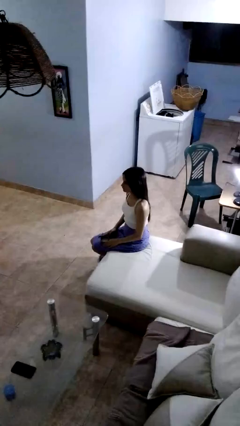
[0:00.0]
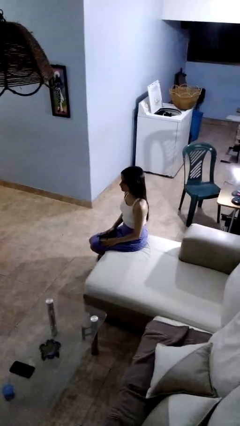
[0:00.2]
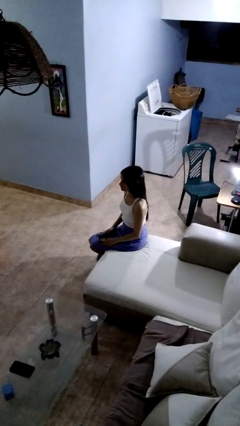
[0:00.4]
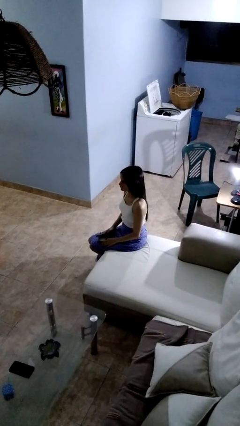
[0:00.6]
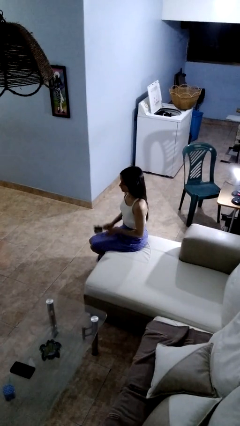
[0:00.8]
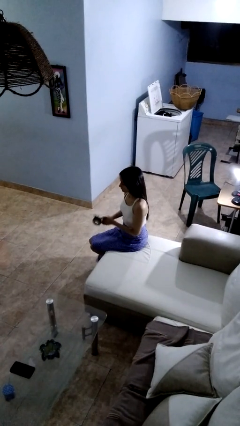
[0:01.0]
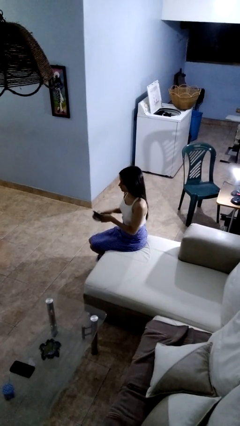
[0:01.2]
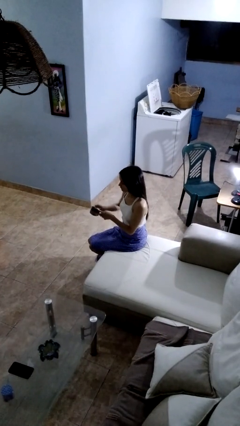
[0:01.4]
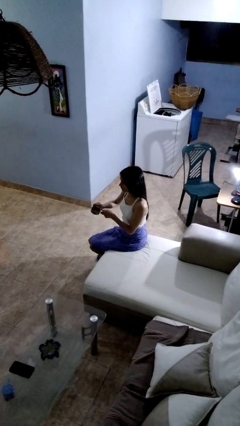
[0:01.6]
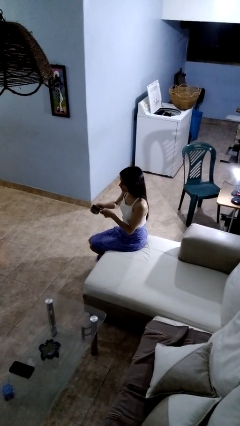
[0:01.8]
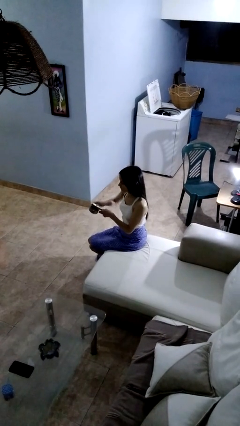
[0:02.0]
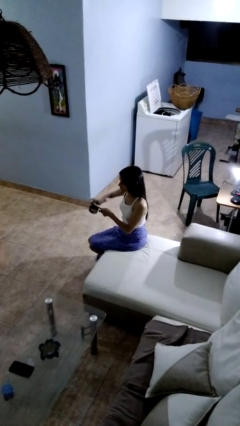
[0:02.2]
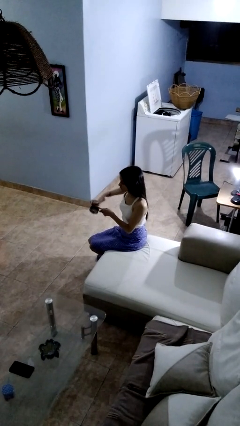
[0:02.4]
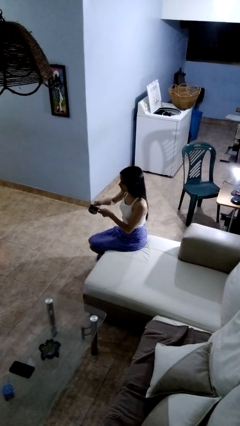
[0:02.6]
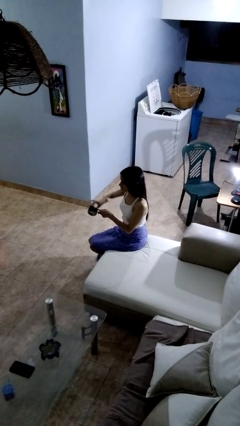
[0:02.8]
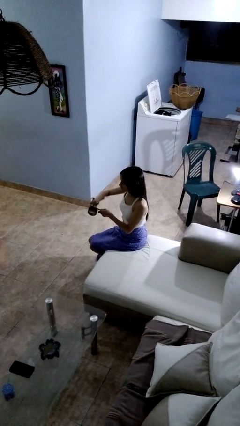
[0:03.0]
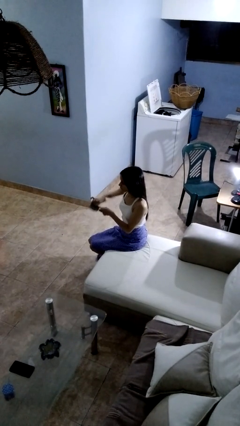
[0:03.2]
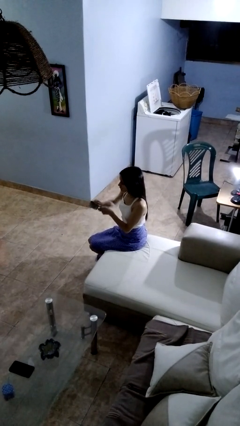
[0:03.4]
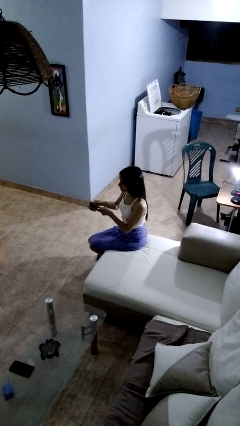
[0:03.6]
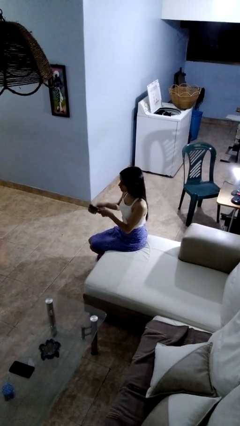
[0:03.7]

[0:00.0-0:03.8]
person opens can with can opener

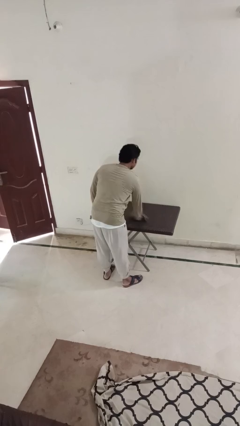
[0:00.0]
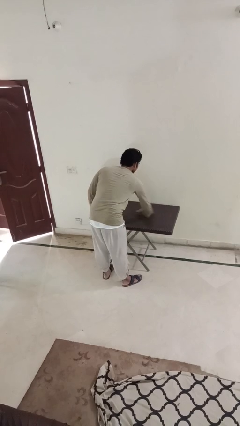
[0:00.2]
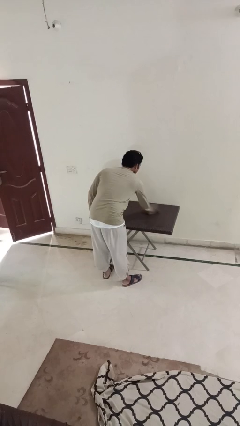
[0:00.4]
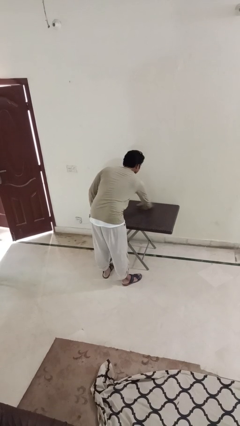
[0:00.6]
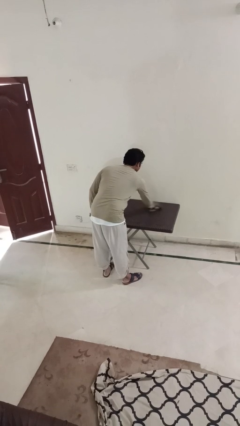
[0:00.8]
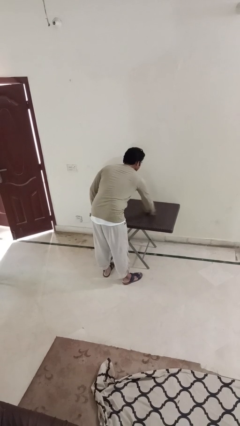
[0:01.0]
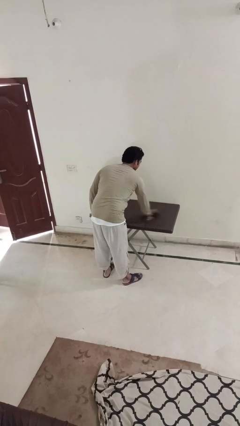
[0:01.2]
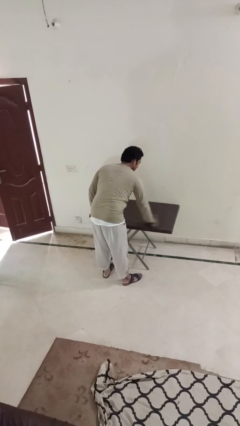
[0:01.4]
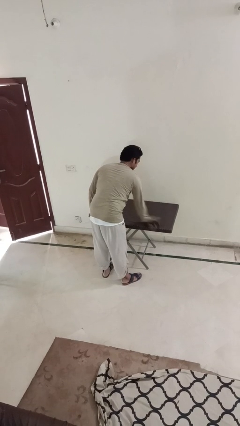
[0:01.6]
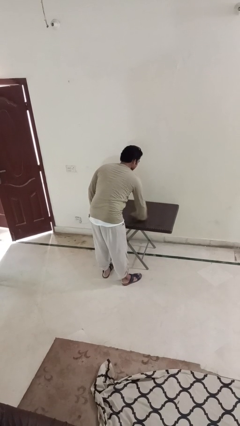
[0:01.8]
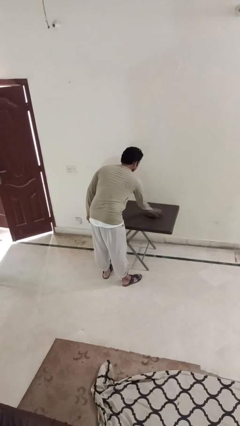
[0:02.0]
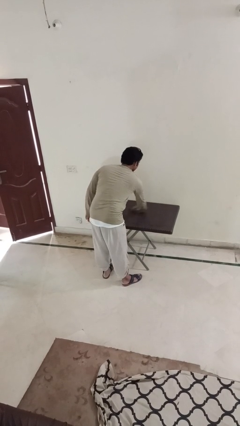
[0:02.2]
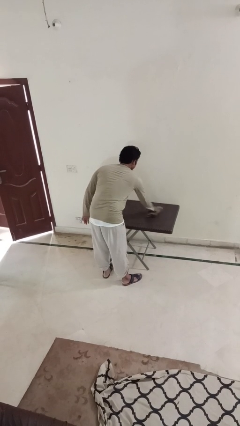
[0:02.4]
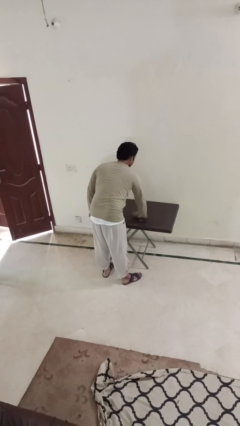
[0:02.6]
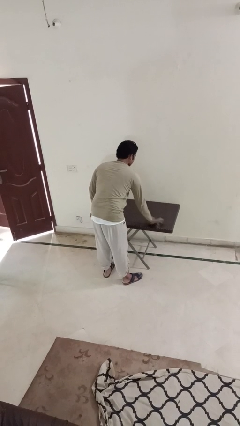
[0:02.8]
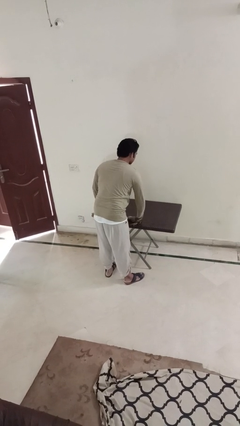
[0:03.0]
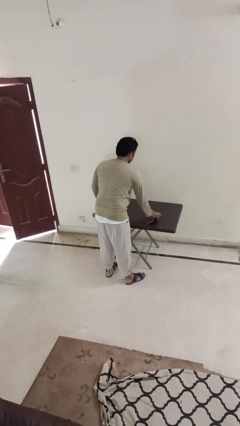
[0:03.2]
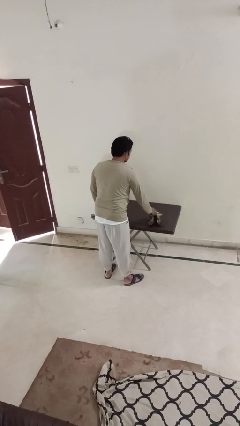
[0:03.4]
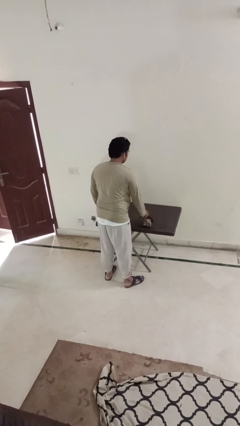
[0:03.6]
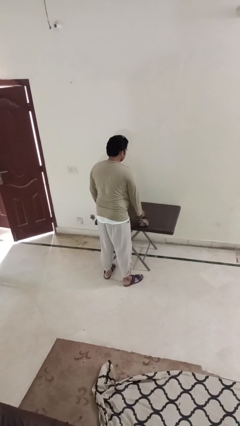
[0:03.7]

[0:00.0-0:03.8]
person cleans table with rag

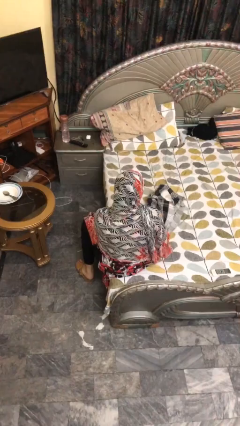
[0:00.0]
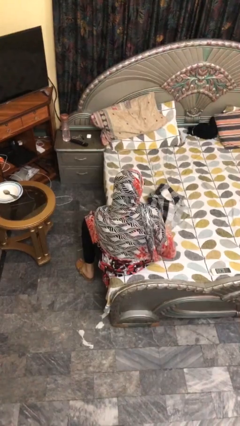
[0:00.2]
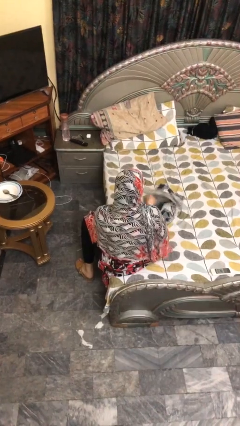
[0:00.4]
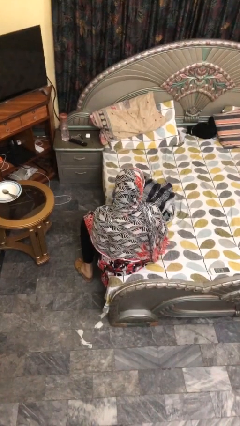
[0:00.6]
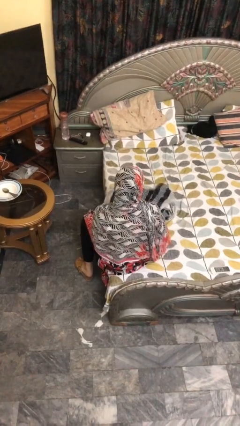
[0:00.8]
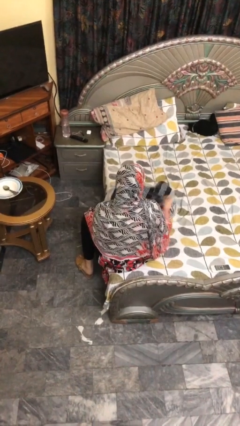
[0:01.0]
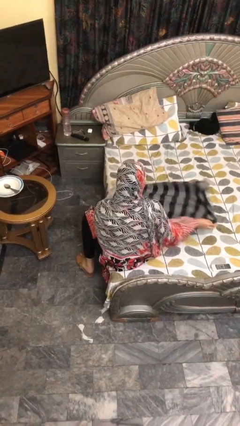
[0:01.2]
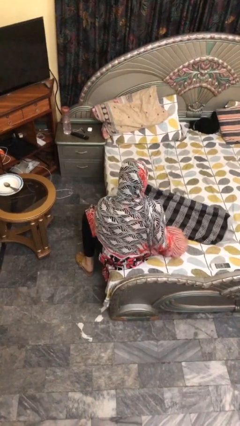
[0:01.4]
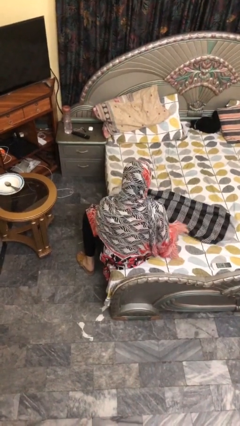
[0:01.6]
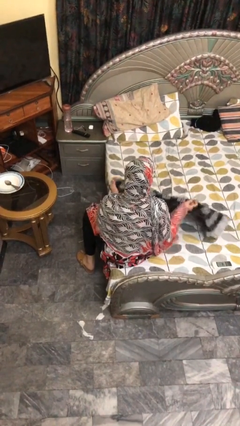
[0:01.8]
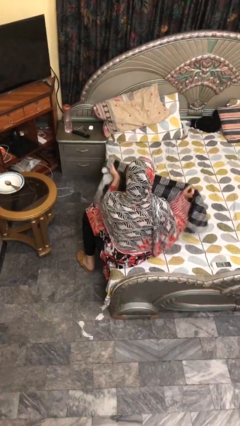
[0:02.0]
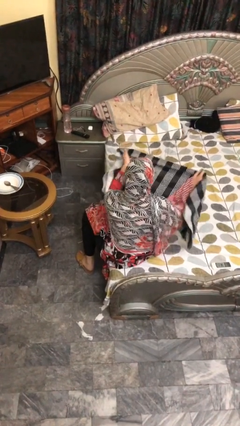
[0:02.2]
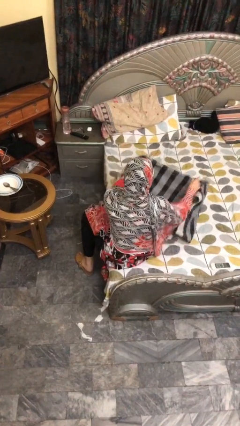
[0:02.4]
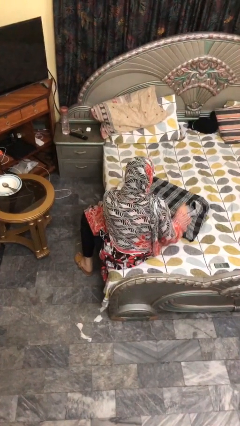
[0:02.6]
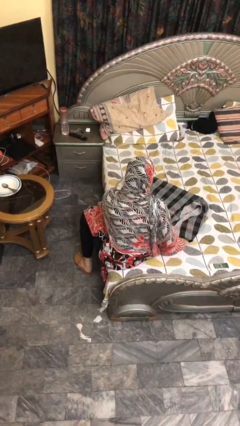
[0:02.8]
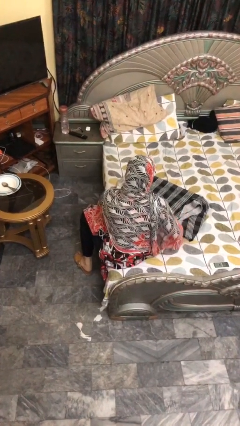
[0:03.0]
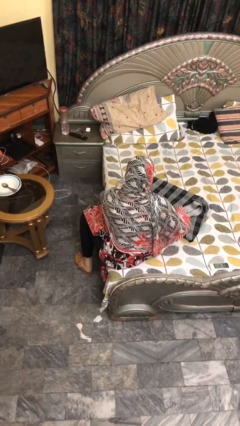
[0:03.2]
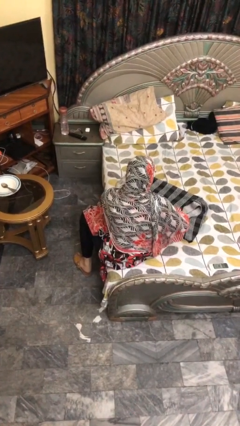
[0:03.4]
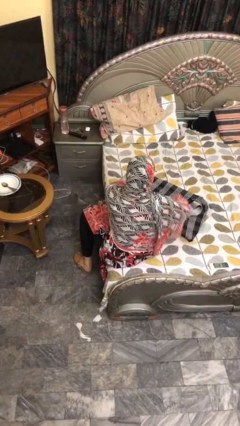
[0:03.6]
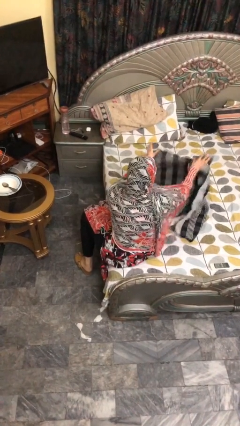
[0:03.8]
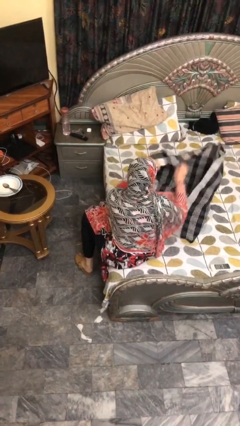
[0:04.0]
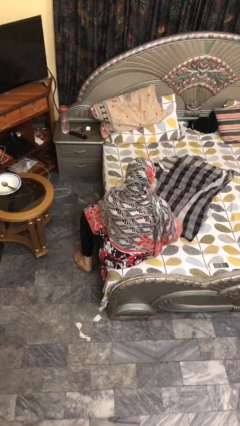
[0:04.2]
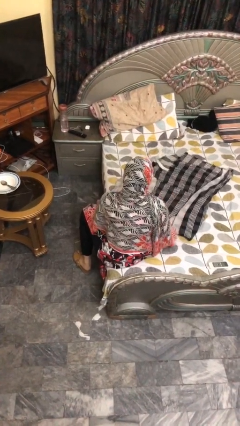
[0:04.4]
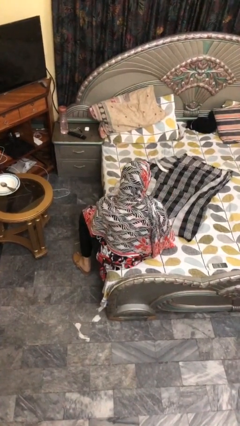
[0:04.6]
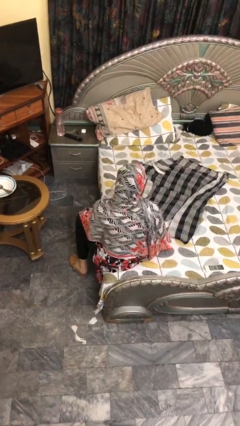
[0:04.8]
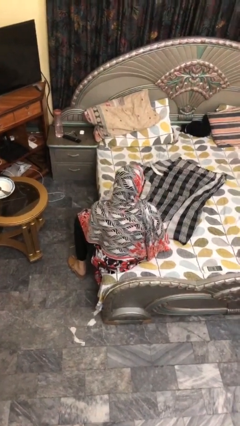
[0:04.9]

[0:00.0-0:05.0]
person unfolds blanket

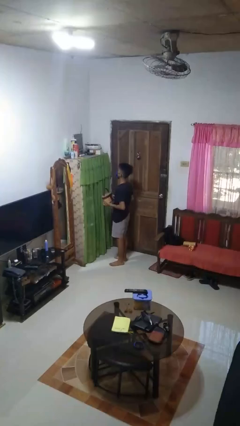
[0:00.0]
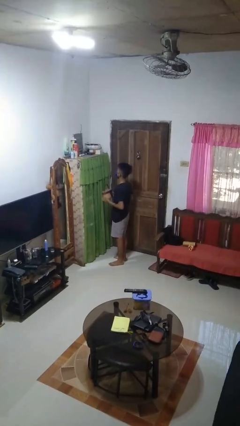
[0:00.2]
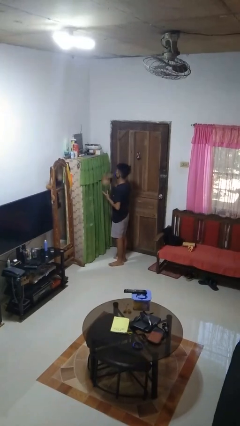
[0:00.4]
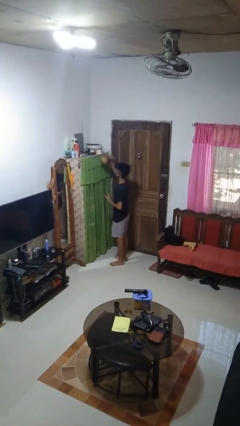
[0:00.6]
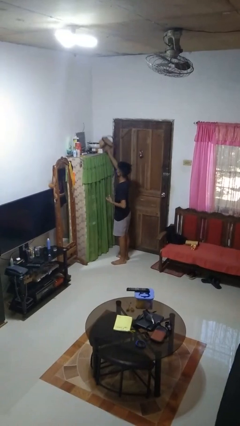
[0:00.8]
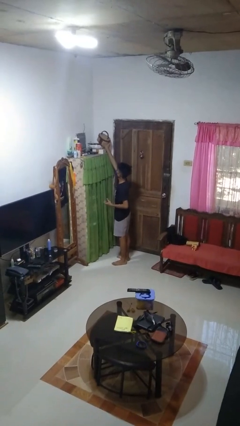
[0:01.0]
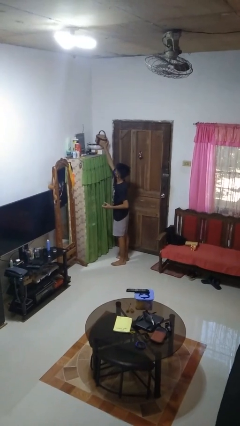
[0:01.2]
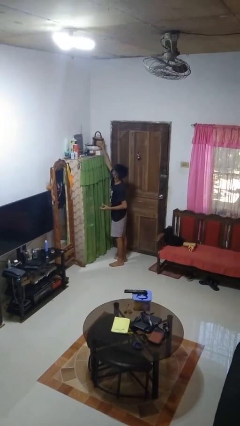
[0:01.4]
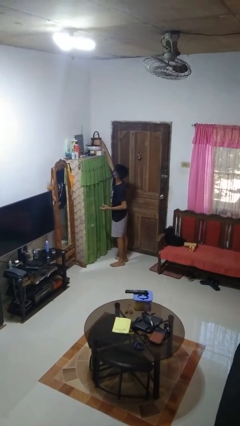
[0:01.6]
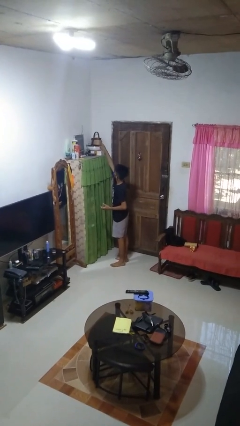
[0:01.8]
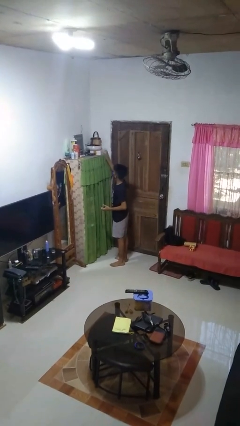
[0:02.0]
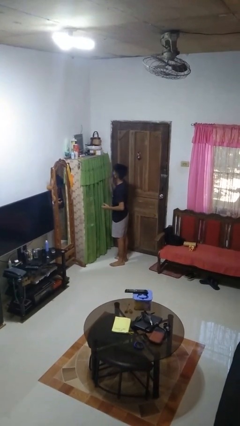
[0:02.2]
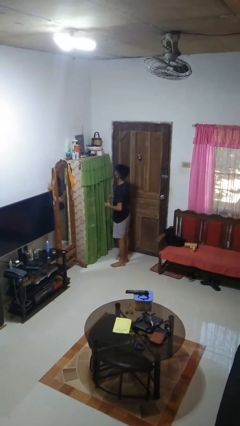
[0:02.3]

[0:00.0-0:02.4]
person puts down object on shelf

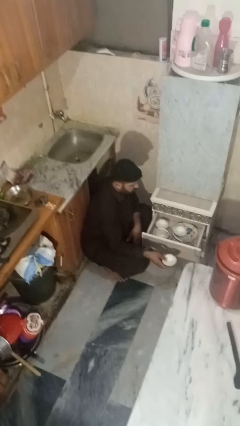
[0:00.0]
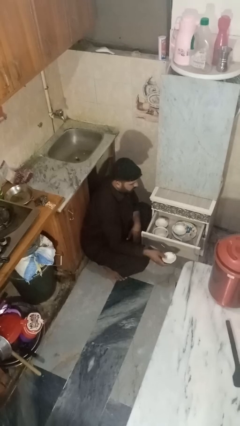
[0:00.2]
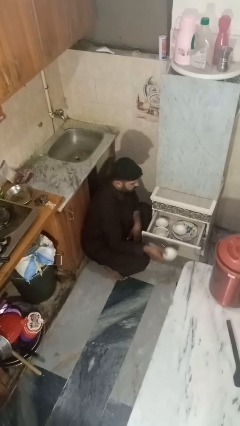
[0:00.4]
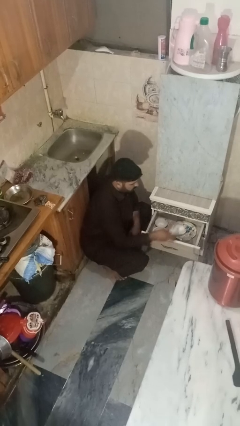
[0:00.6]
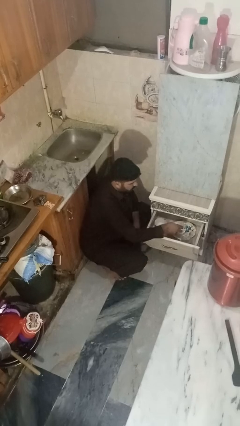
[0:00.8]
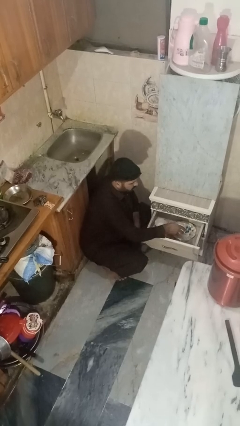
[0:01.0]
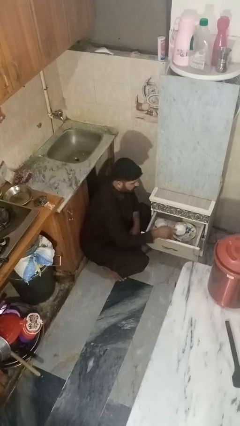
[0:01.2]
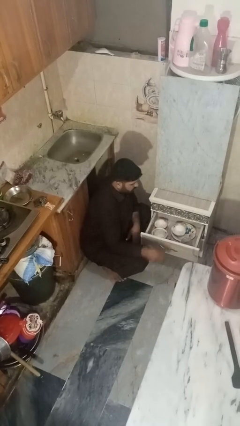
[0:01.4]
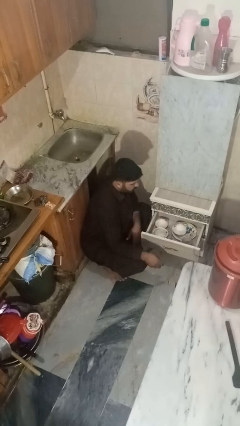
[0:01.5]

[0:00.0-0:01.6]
person puts object into kitchen drawer

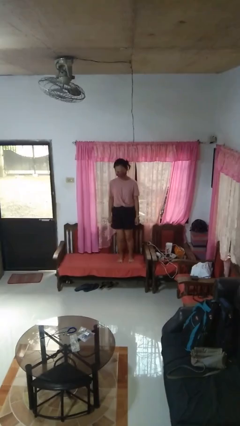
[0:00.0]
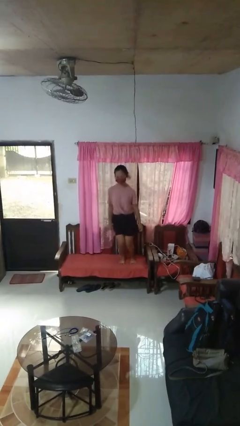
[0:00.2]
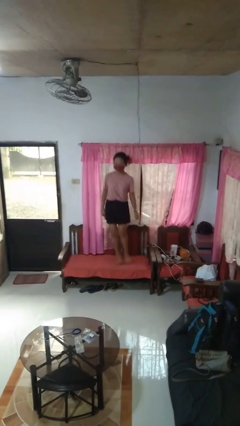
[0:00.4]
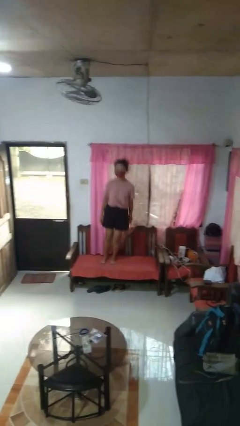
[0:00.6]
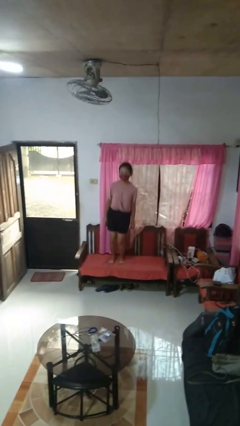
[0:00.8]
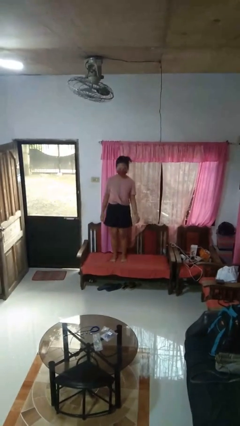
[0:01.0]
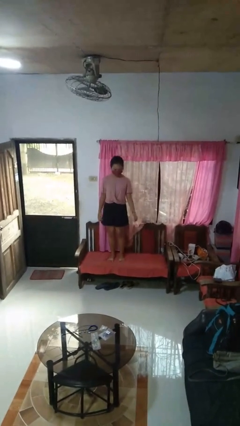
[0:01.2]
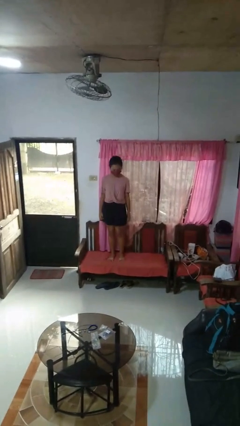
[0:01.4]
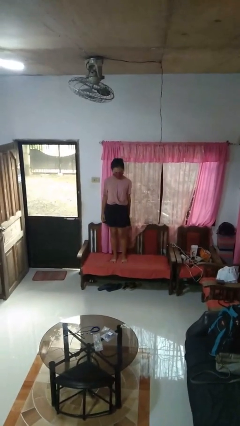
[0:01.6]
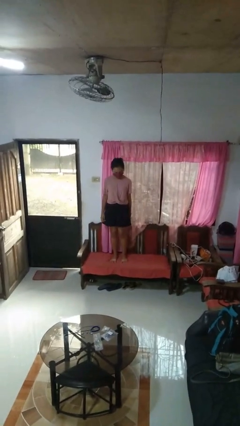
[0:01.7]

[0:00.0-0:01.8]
person jumps on couch
